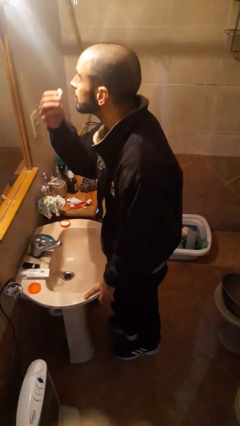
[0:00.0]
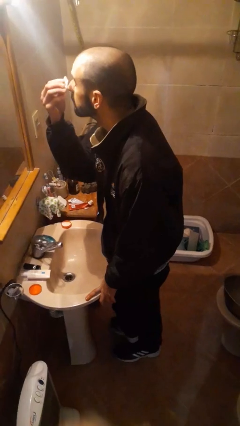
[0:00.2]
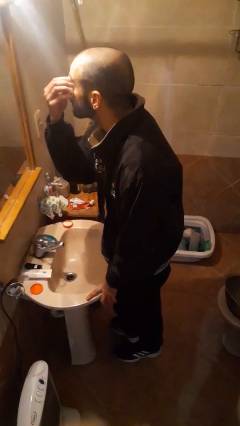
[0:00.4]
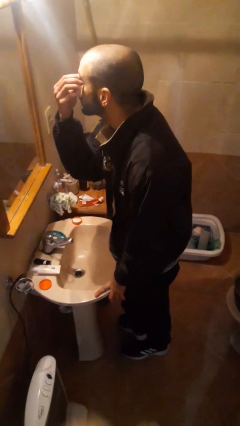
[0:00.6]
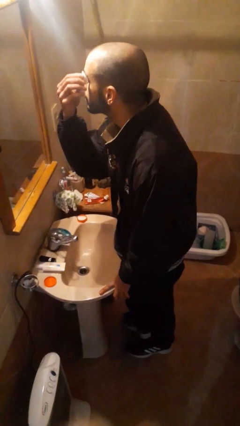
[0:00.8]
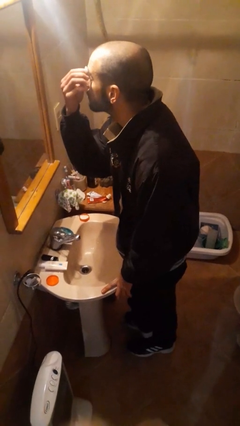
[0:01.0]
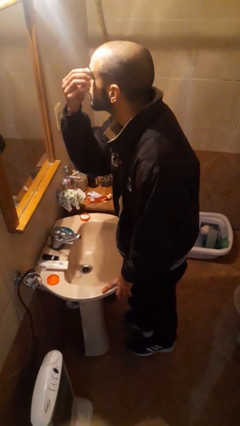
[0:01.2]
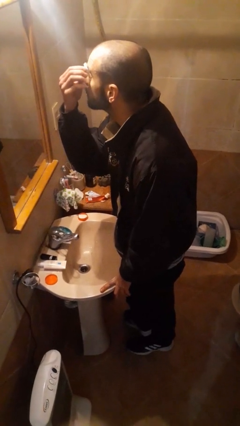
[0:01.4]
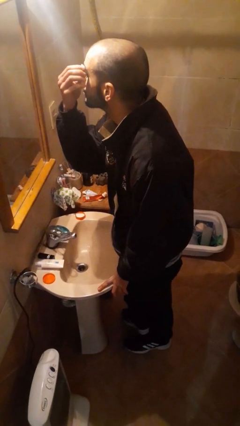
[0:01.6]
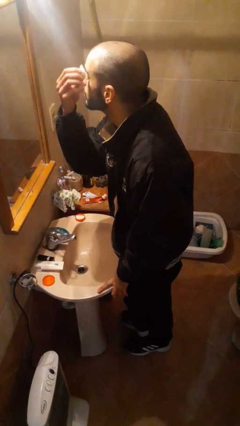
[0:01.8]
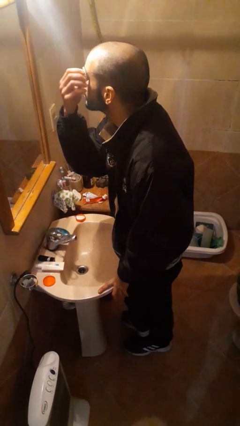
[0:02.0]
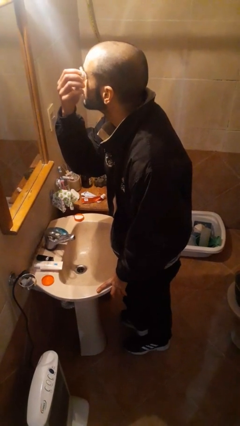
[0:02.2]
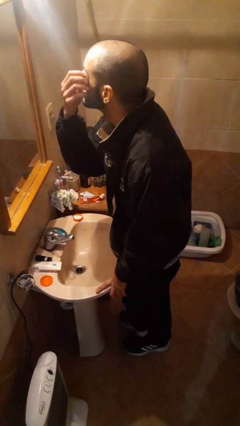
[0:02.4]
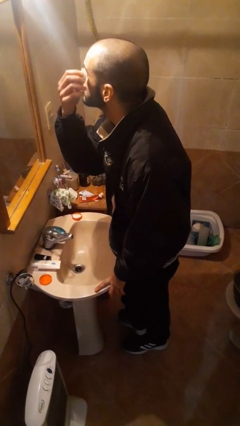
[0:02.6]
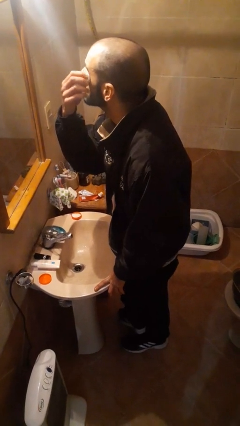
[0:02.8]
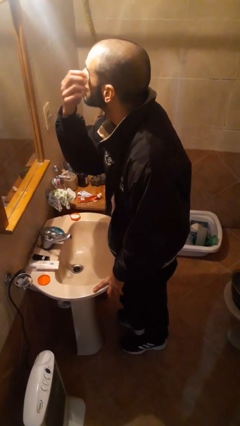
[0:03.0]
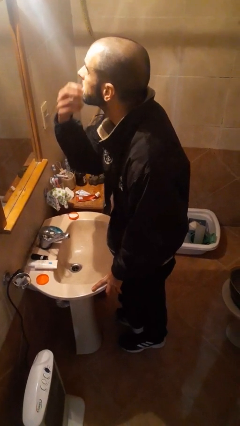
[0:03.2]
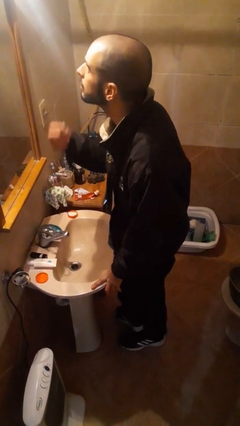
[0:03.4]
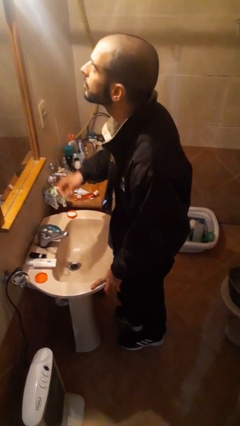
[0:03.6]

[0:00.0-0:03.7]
person applies eye makeup

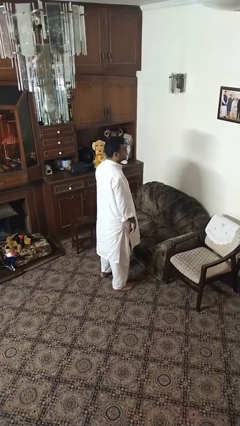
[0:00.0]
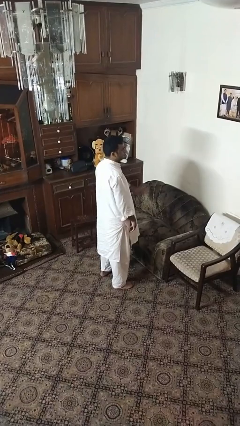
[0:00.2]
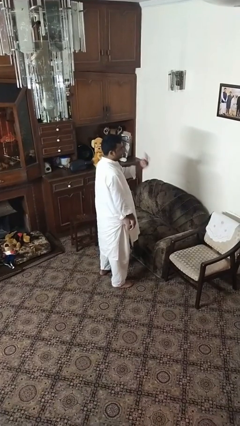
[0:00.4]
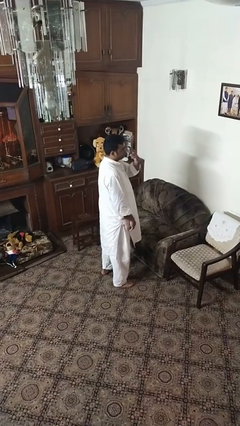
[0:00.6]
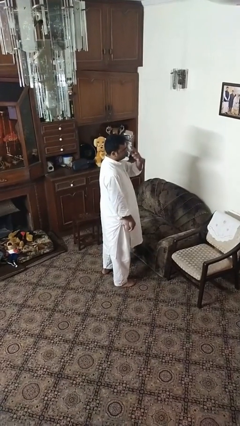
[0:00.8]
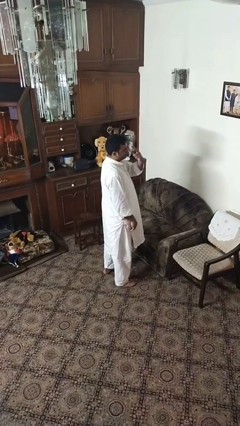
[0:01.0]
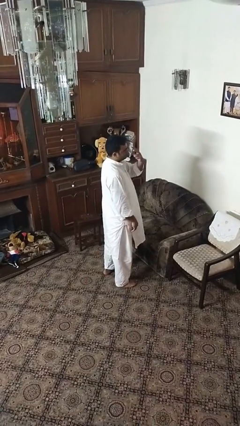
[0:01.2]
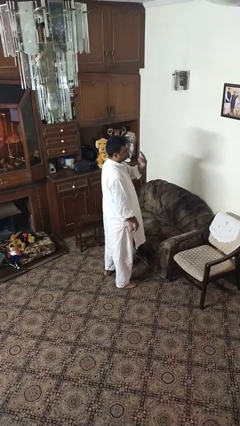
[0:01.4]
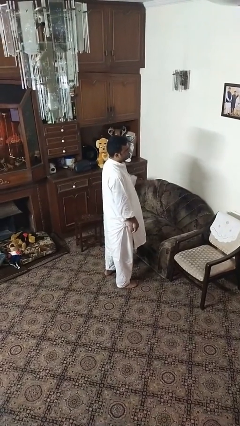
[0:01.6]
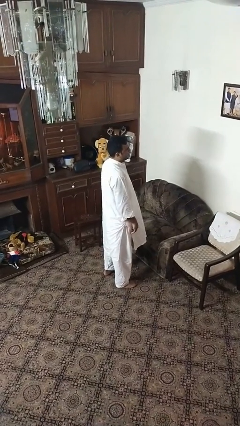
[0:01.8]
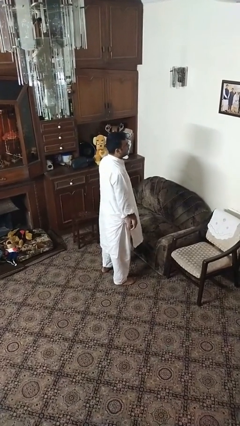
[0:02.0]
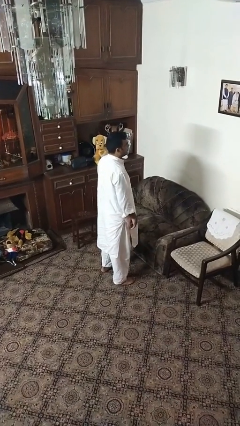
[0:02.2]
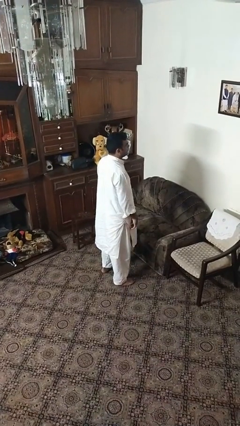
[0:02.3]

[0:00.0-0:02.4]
person gestures watch closely

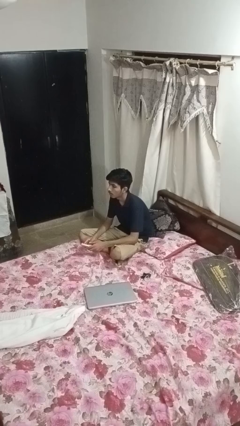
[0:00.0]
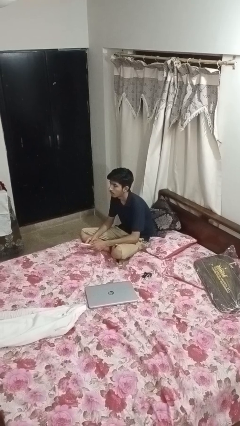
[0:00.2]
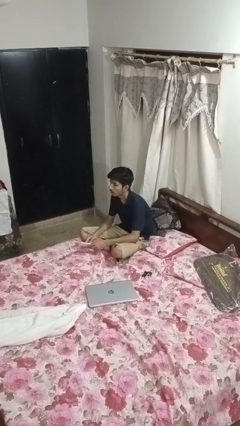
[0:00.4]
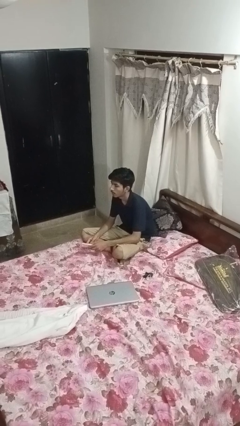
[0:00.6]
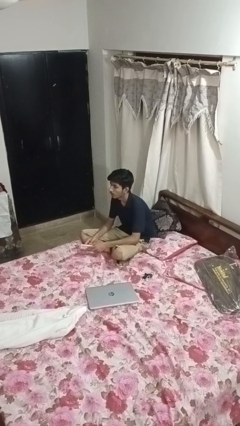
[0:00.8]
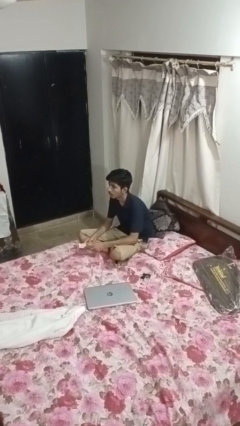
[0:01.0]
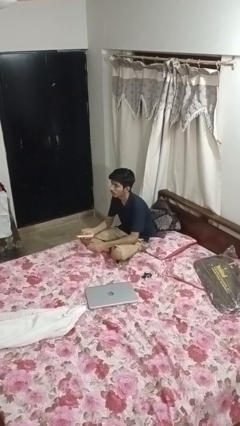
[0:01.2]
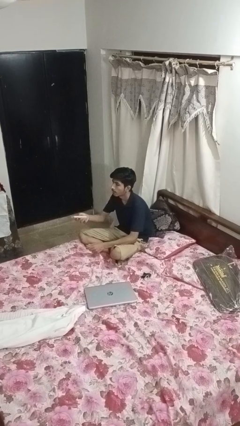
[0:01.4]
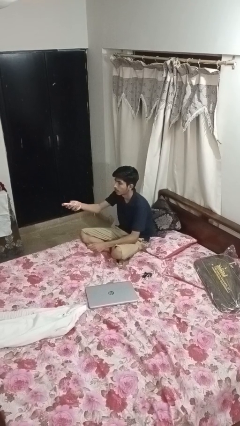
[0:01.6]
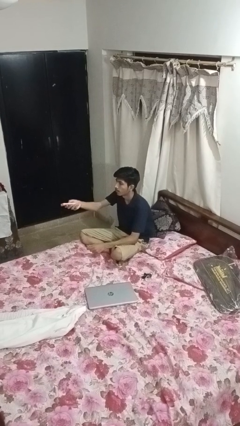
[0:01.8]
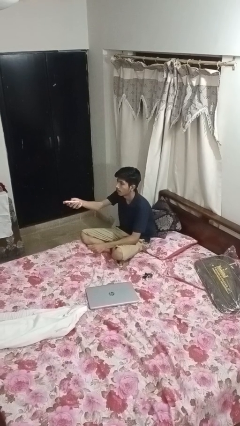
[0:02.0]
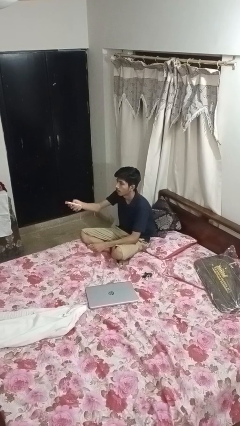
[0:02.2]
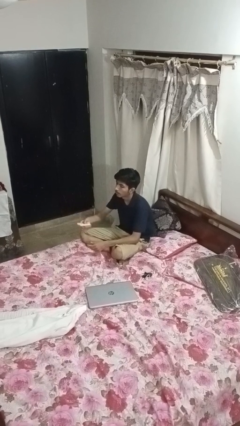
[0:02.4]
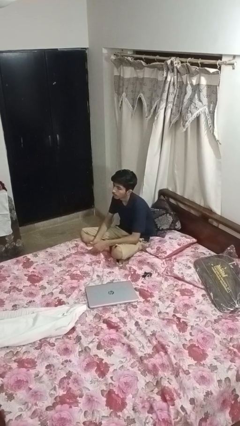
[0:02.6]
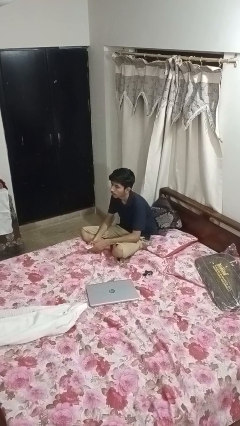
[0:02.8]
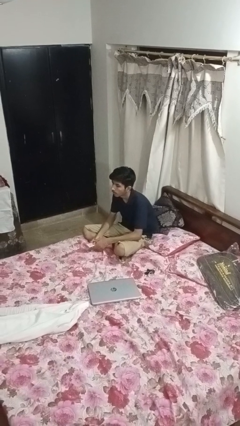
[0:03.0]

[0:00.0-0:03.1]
person uses television remote

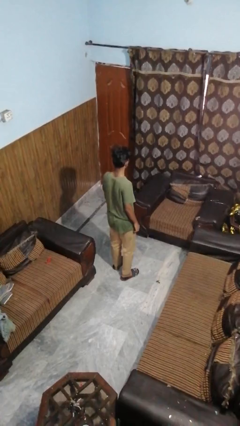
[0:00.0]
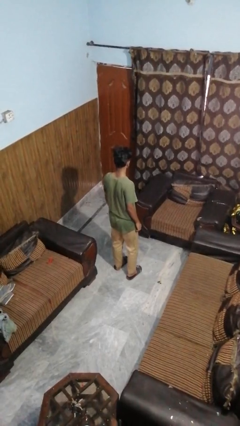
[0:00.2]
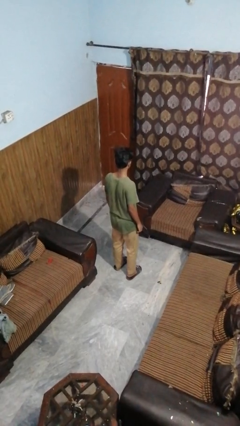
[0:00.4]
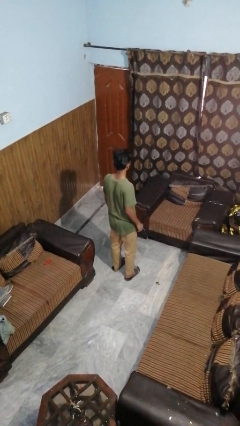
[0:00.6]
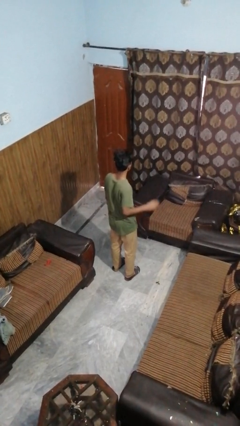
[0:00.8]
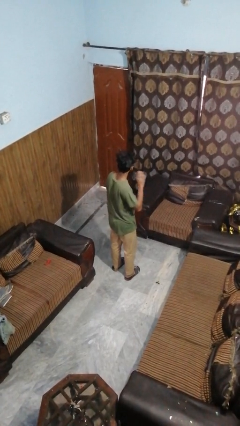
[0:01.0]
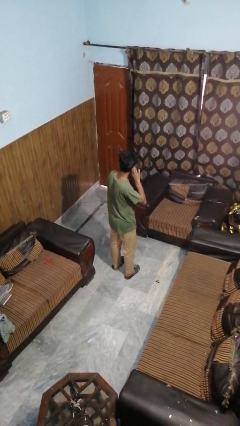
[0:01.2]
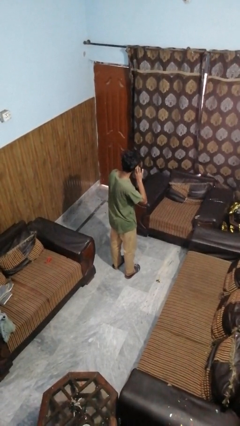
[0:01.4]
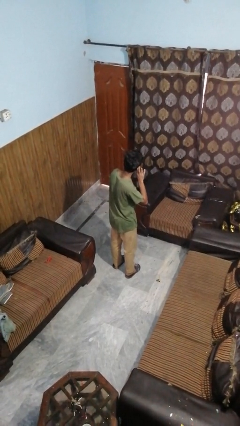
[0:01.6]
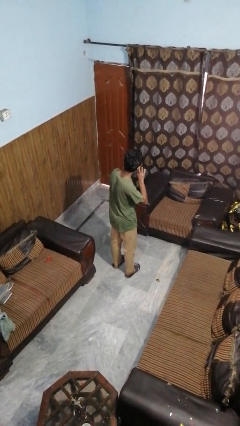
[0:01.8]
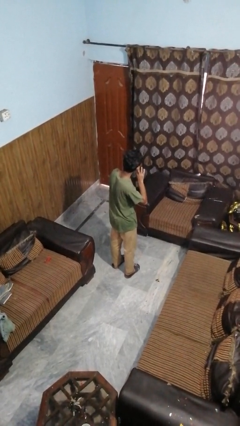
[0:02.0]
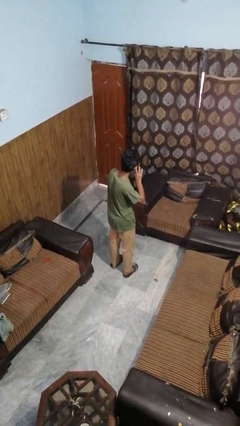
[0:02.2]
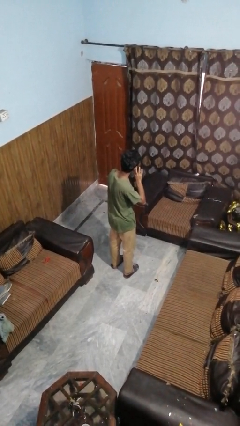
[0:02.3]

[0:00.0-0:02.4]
person gestures listen closely

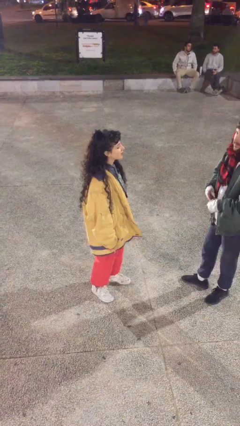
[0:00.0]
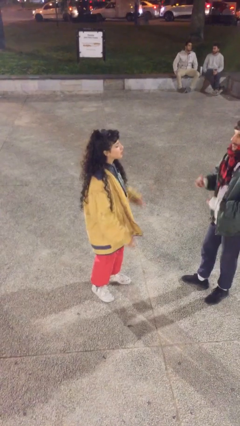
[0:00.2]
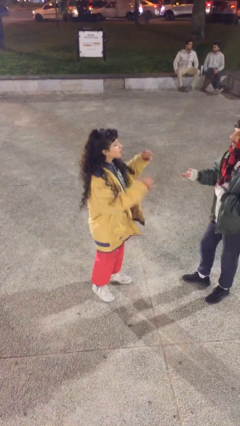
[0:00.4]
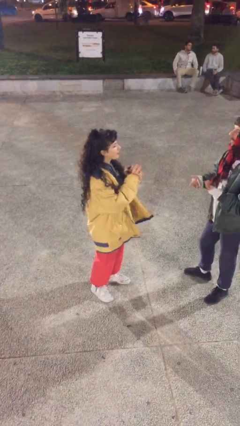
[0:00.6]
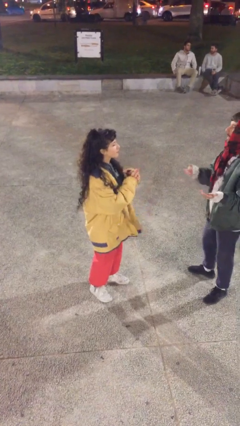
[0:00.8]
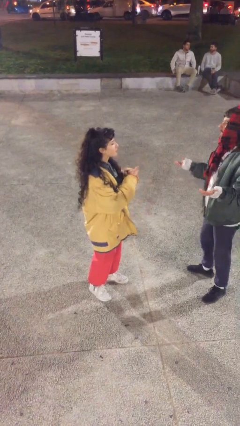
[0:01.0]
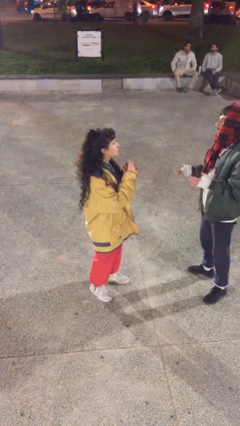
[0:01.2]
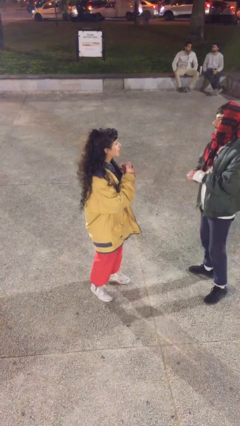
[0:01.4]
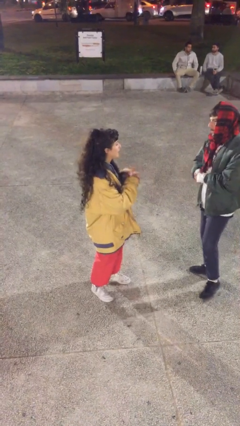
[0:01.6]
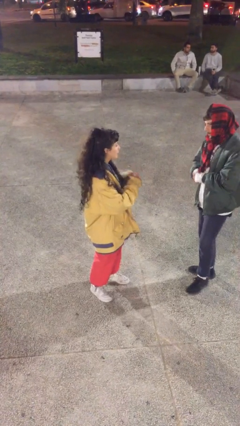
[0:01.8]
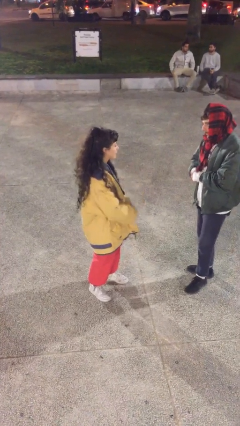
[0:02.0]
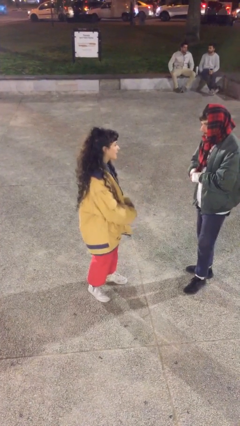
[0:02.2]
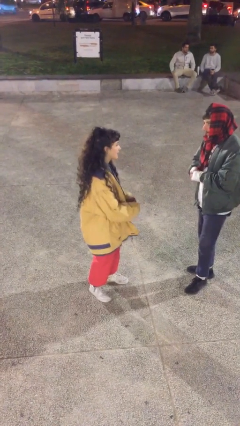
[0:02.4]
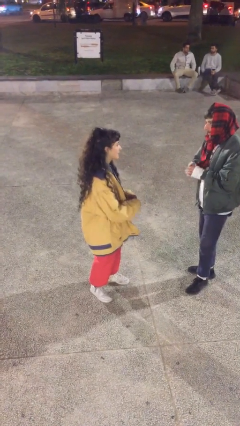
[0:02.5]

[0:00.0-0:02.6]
person talks to person

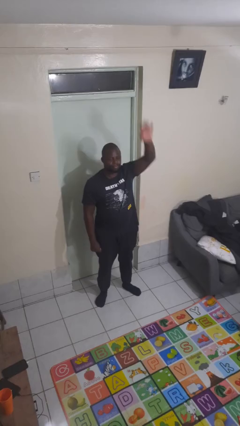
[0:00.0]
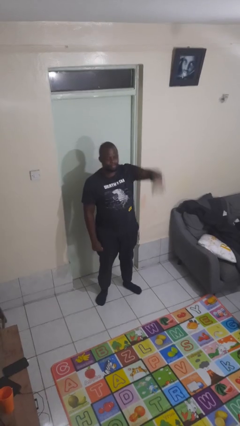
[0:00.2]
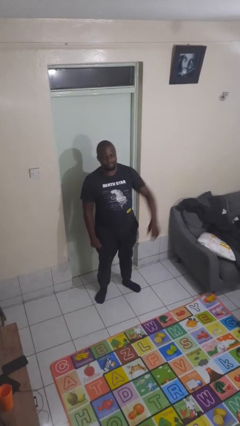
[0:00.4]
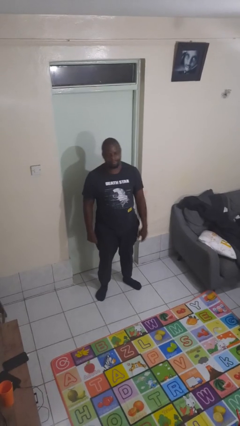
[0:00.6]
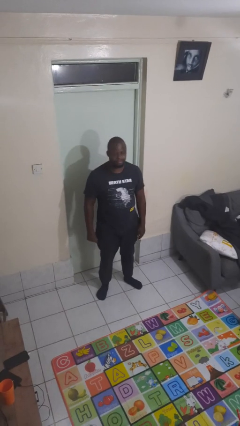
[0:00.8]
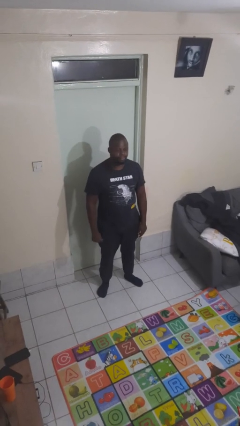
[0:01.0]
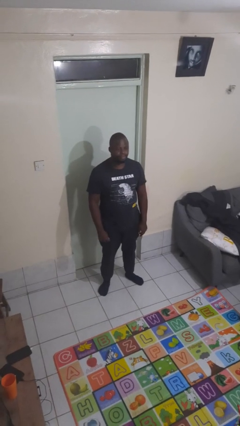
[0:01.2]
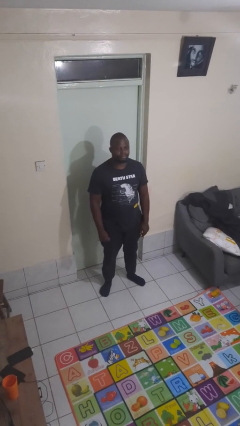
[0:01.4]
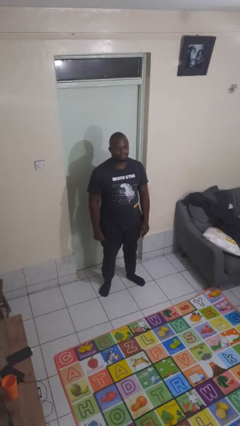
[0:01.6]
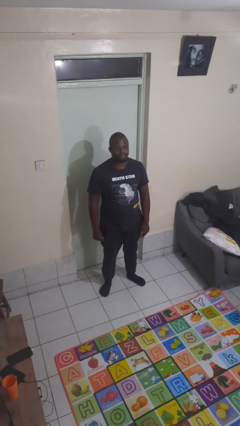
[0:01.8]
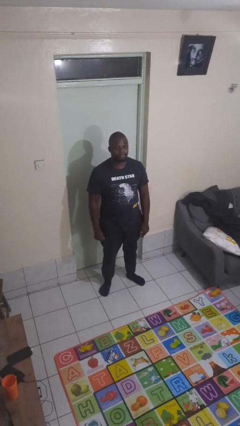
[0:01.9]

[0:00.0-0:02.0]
person gestures lower hand

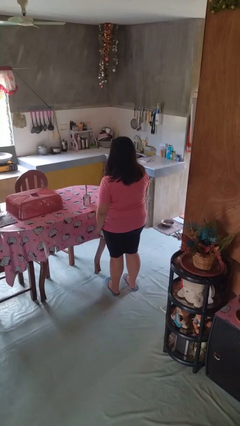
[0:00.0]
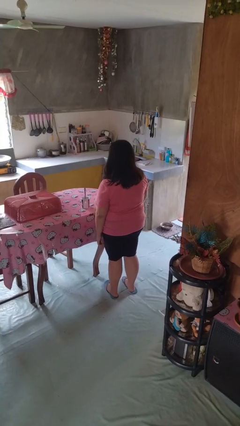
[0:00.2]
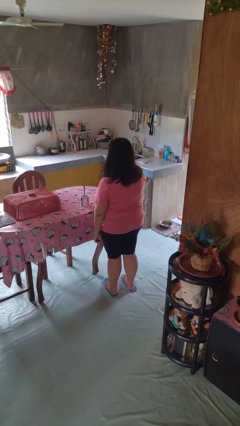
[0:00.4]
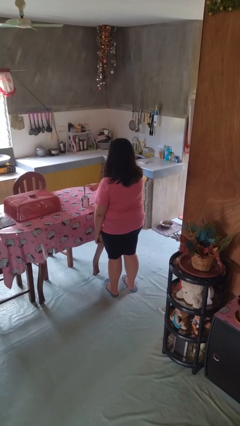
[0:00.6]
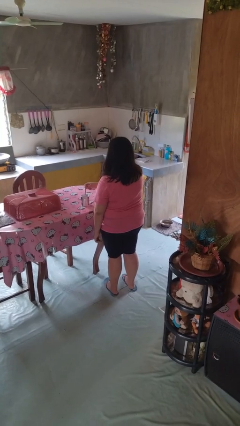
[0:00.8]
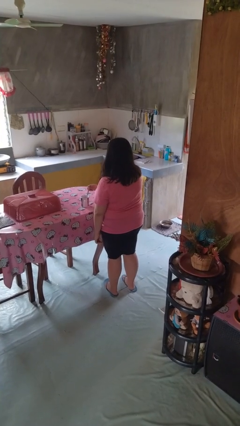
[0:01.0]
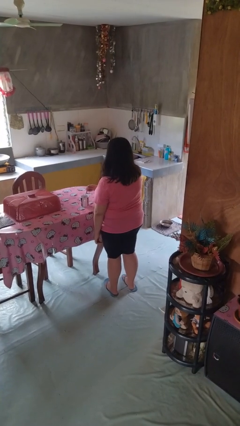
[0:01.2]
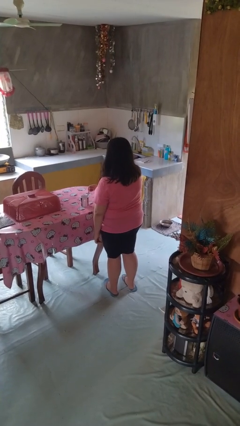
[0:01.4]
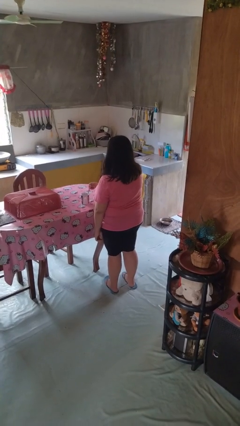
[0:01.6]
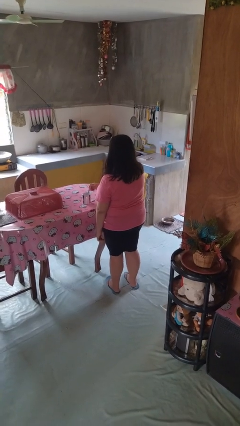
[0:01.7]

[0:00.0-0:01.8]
person stirs mug
